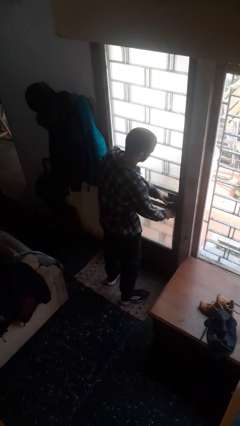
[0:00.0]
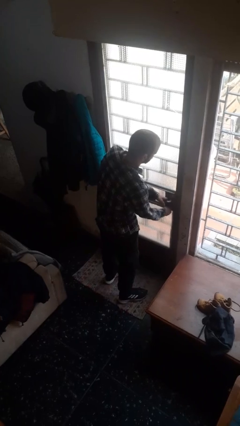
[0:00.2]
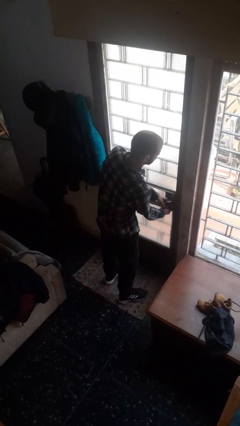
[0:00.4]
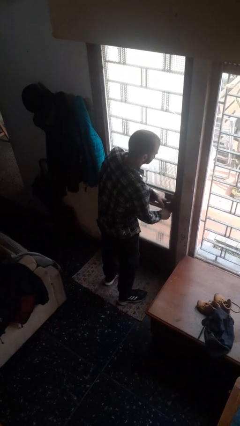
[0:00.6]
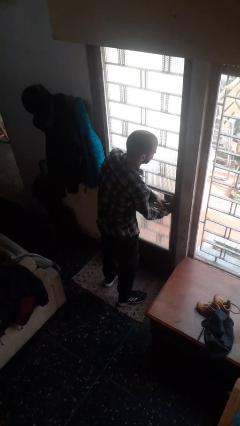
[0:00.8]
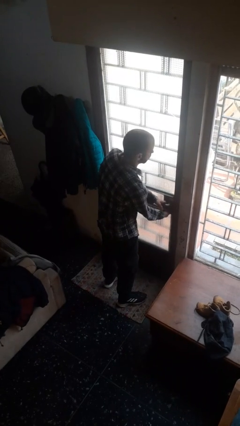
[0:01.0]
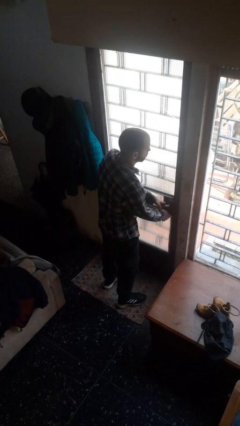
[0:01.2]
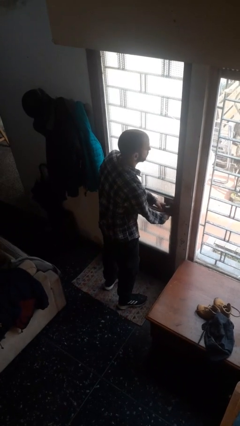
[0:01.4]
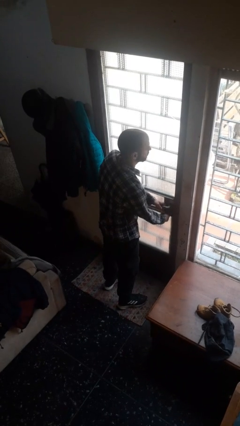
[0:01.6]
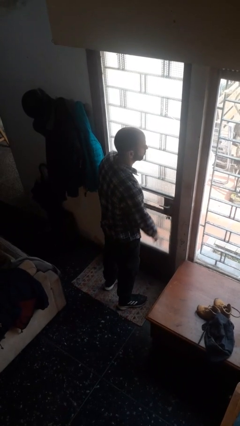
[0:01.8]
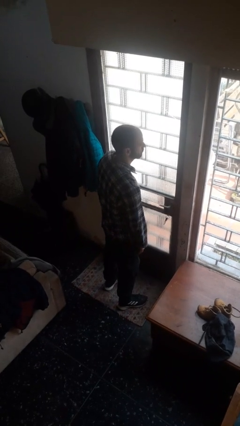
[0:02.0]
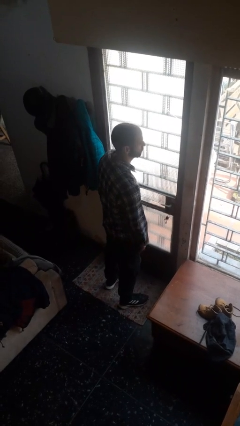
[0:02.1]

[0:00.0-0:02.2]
person locks door with keys

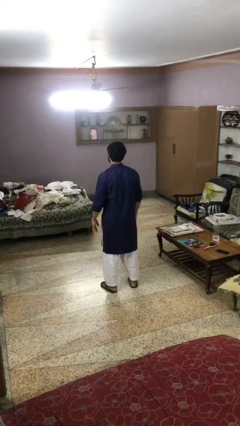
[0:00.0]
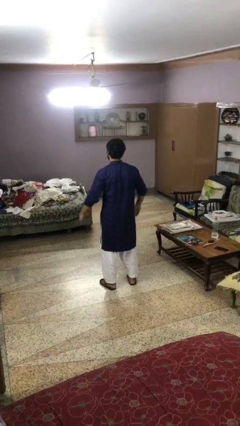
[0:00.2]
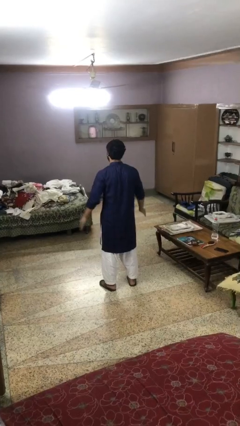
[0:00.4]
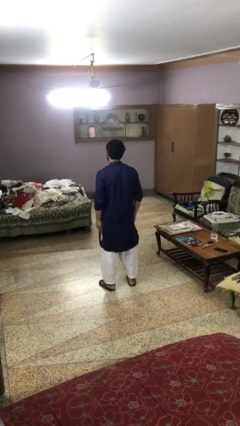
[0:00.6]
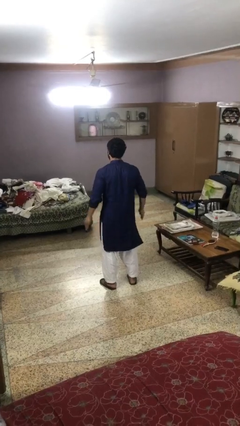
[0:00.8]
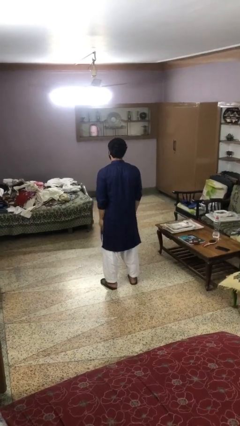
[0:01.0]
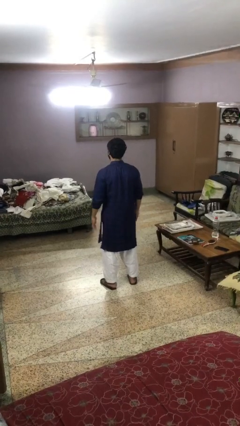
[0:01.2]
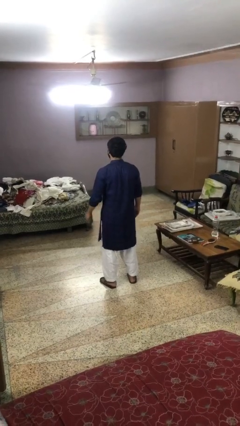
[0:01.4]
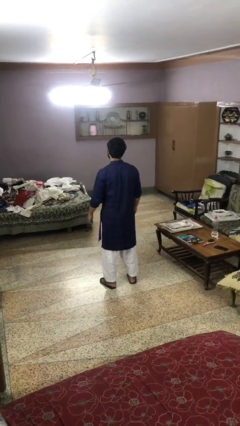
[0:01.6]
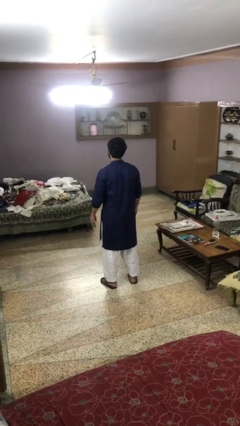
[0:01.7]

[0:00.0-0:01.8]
person slaps hands on thighs

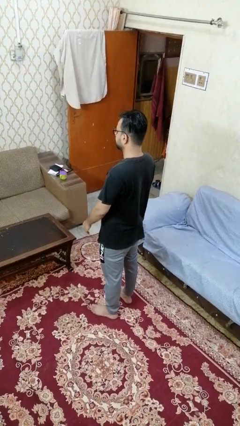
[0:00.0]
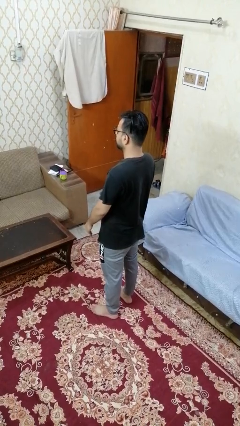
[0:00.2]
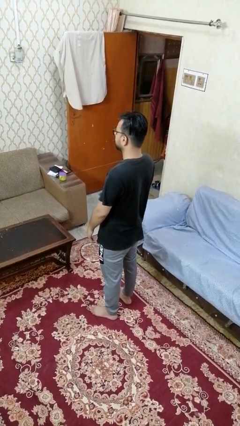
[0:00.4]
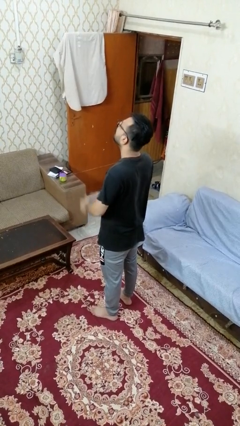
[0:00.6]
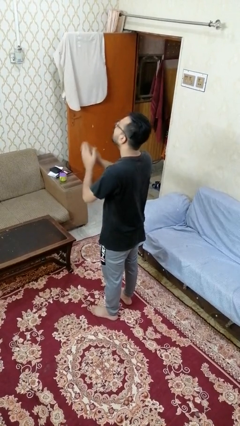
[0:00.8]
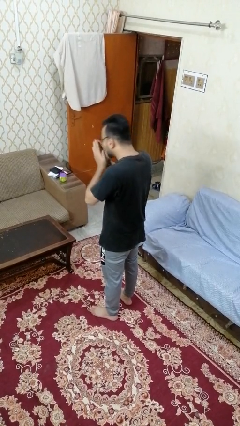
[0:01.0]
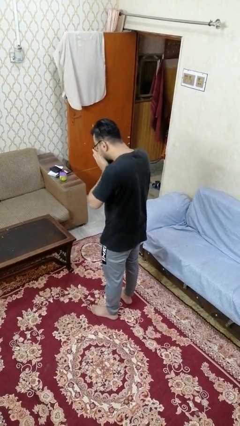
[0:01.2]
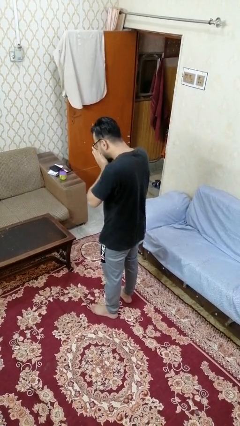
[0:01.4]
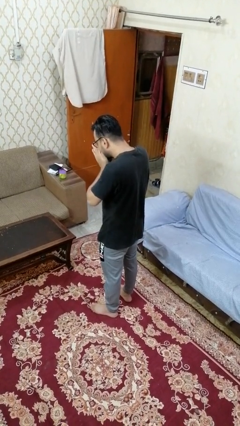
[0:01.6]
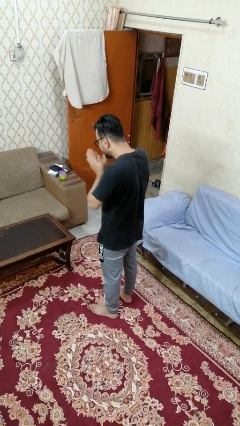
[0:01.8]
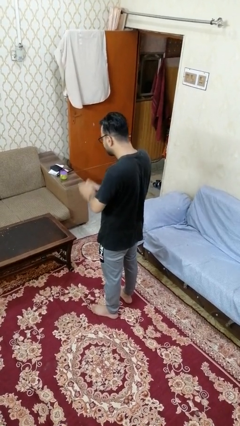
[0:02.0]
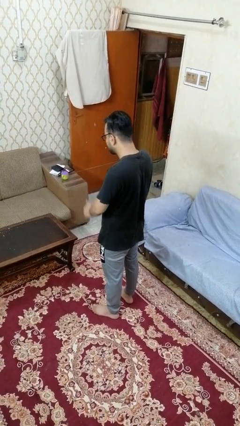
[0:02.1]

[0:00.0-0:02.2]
person sneezes into hand

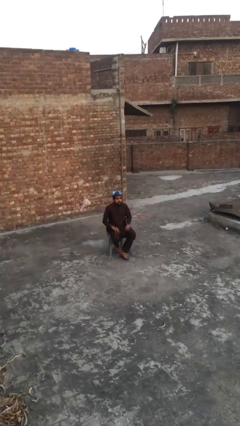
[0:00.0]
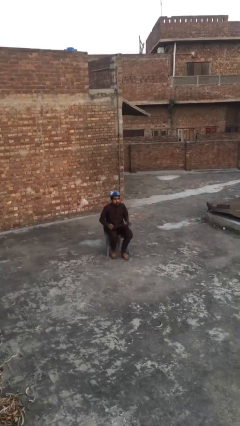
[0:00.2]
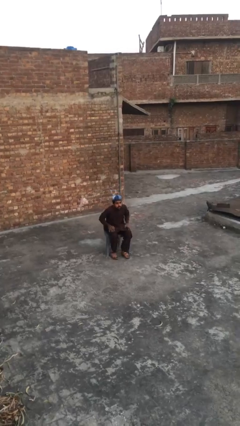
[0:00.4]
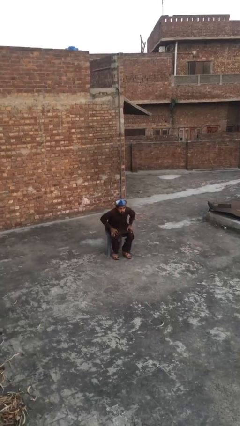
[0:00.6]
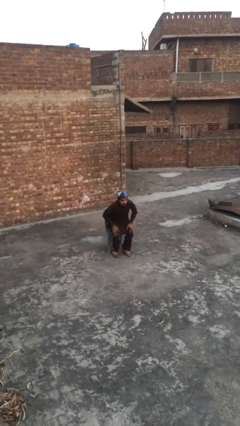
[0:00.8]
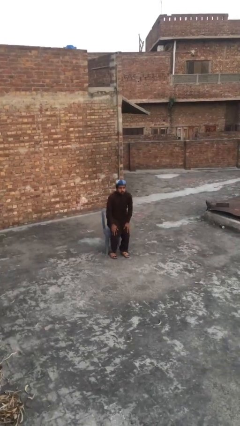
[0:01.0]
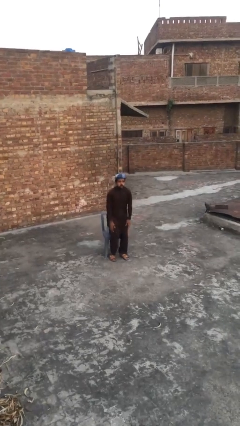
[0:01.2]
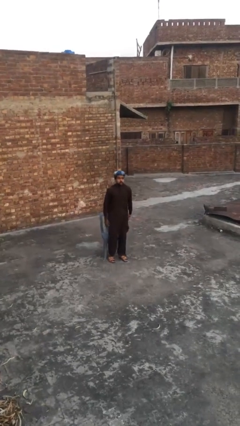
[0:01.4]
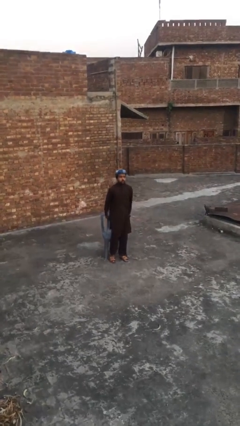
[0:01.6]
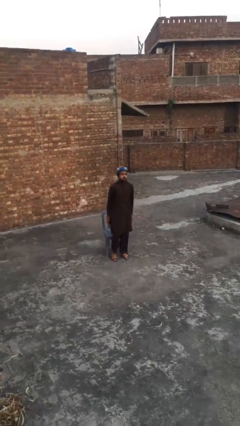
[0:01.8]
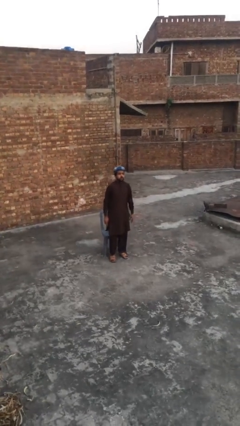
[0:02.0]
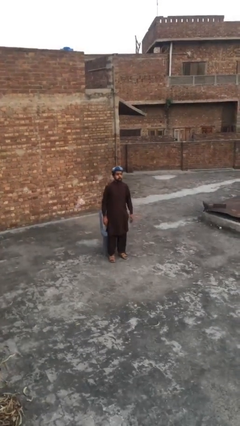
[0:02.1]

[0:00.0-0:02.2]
person stands up

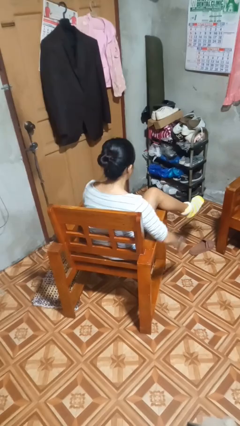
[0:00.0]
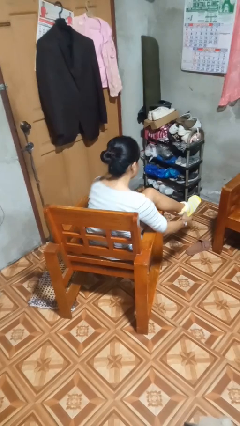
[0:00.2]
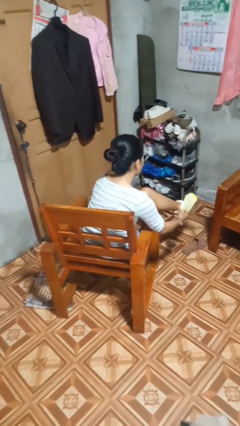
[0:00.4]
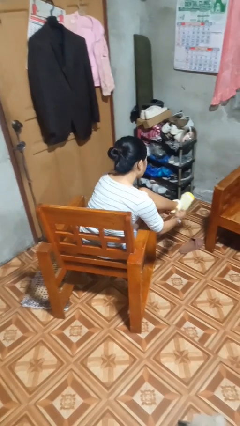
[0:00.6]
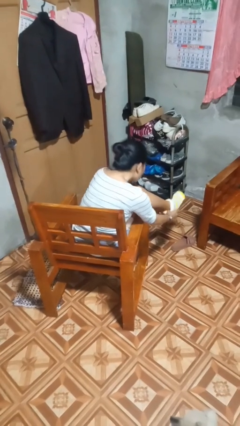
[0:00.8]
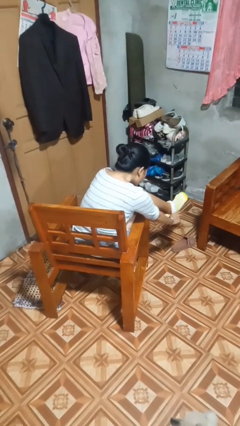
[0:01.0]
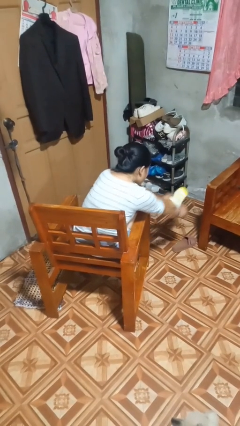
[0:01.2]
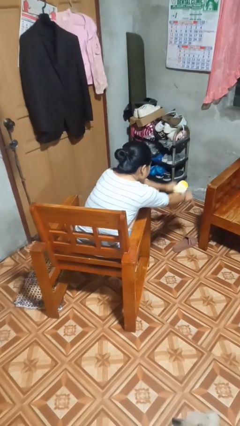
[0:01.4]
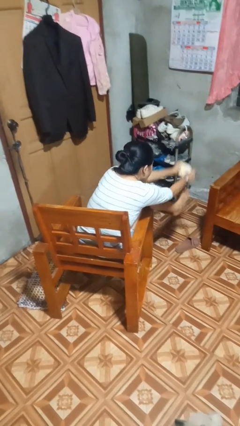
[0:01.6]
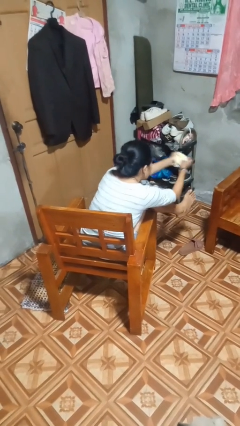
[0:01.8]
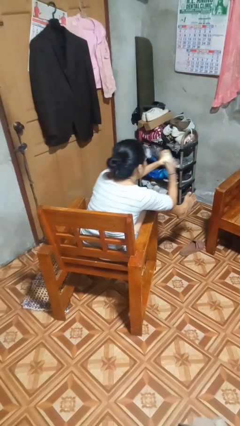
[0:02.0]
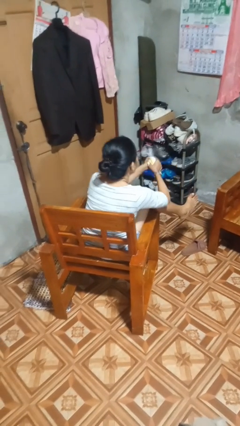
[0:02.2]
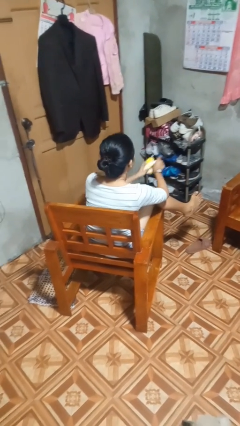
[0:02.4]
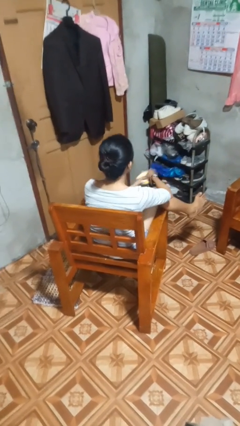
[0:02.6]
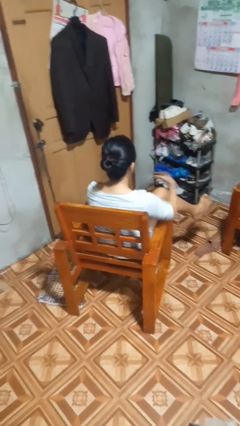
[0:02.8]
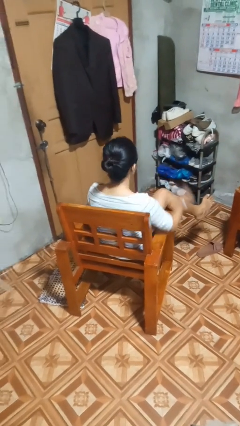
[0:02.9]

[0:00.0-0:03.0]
person takes off socks

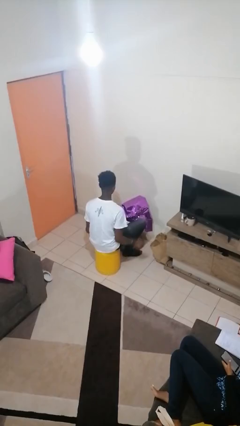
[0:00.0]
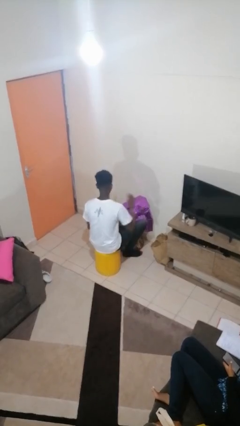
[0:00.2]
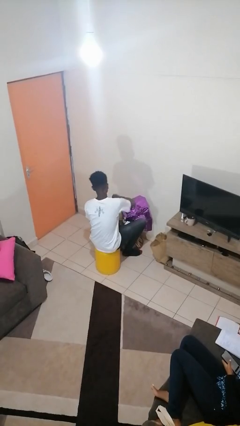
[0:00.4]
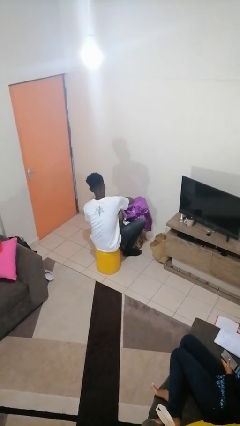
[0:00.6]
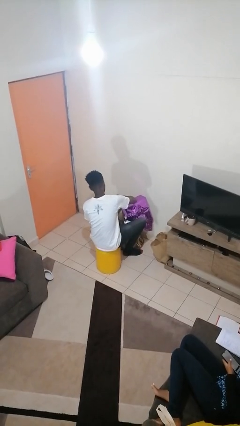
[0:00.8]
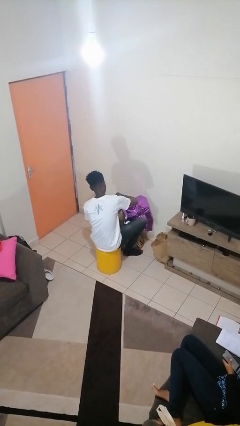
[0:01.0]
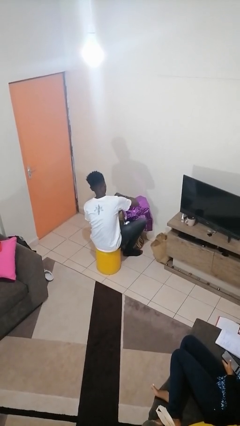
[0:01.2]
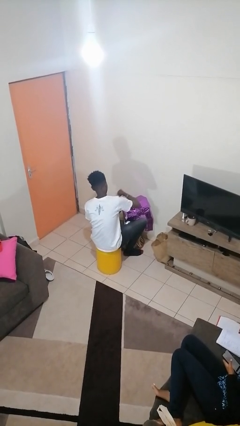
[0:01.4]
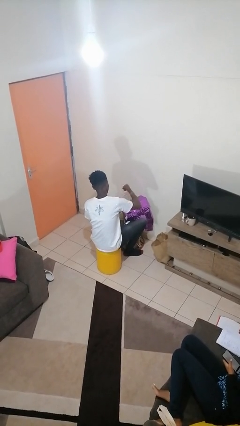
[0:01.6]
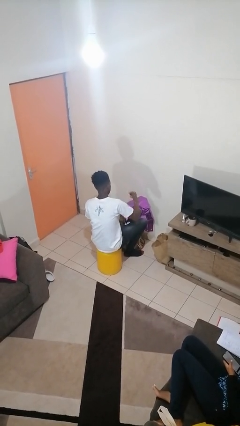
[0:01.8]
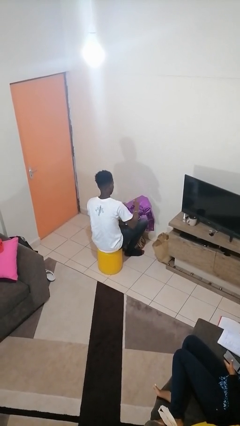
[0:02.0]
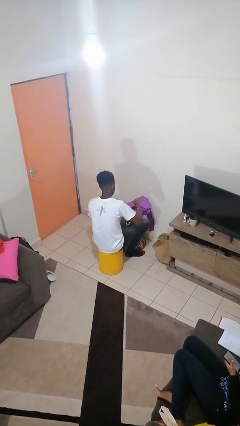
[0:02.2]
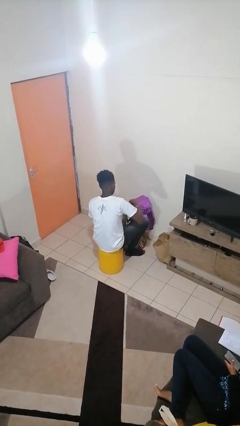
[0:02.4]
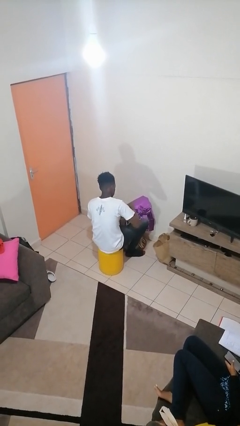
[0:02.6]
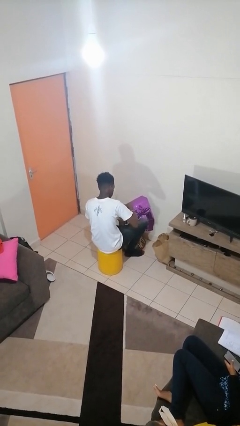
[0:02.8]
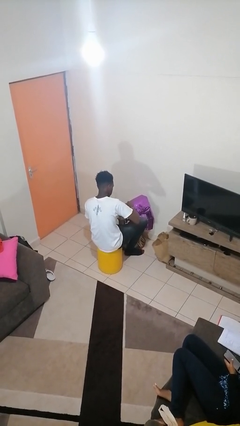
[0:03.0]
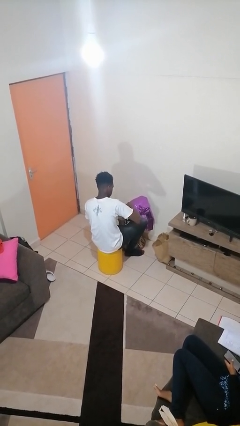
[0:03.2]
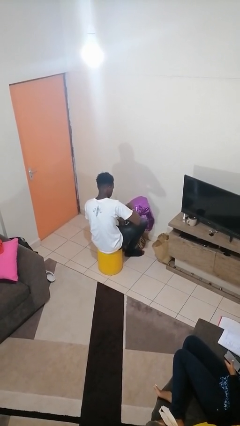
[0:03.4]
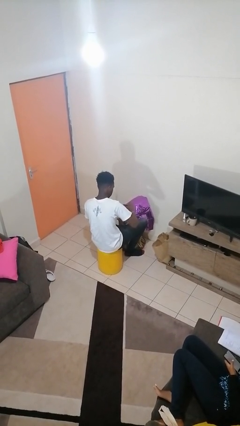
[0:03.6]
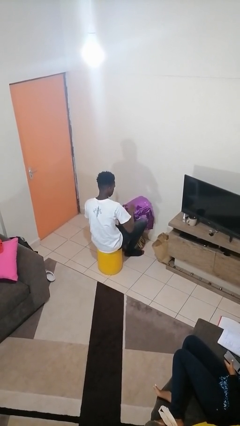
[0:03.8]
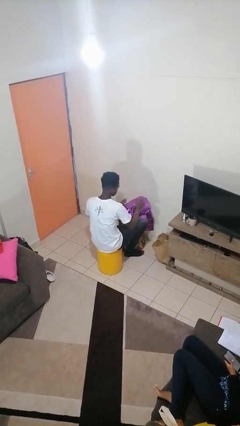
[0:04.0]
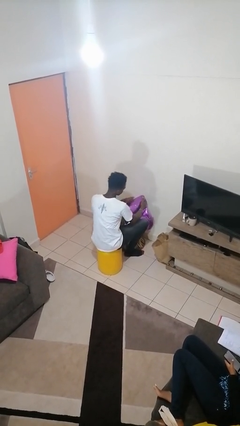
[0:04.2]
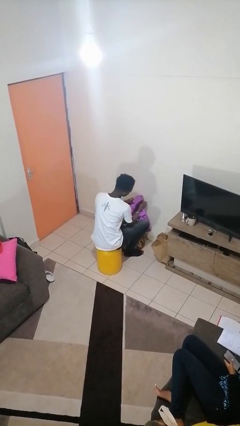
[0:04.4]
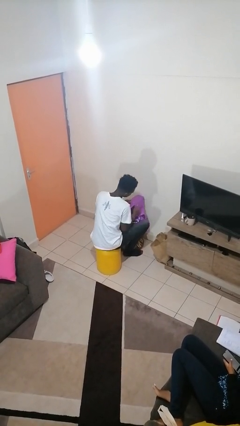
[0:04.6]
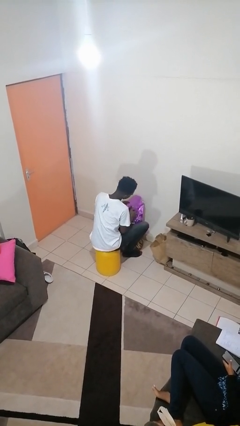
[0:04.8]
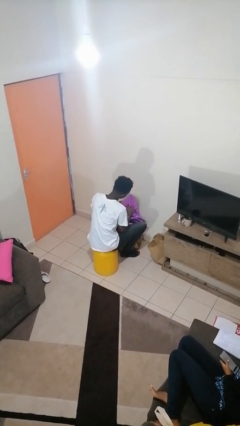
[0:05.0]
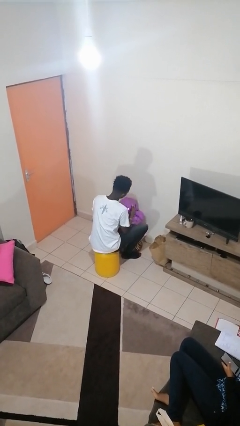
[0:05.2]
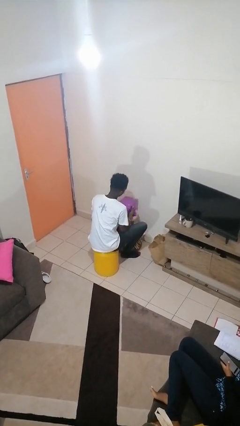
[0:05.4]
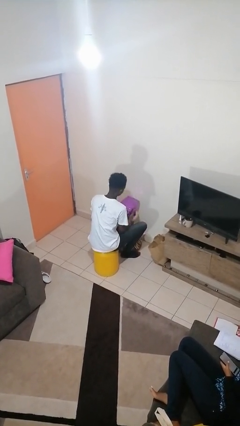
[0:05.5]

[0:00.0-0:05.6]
person wraps box

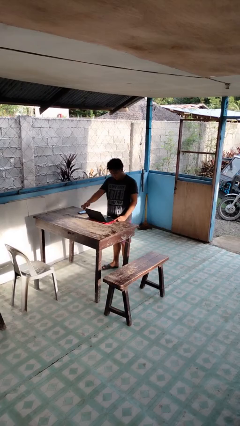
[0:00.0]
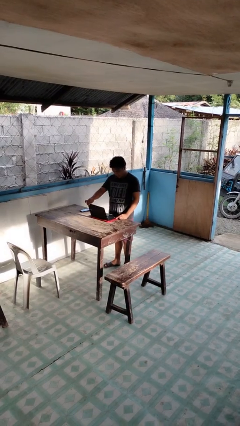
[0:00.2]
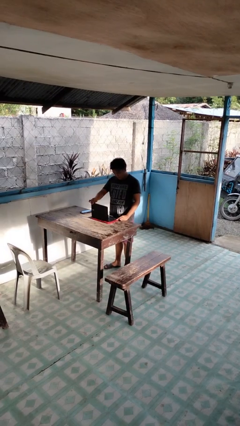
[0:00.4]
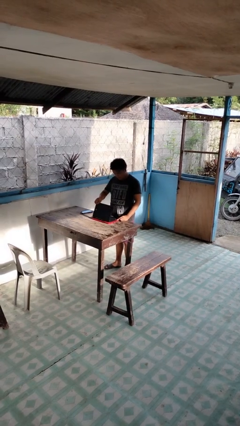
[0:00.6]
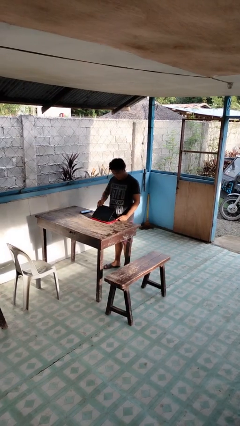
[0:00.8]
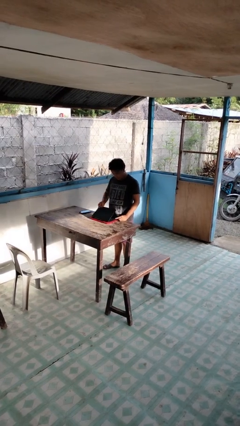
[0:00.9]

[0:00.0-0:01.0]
person closes laptop
